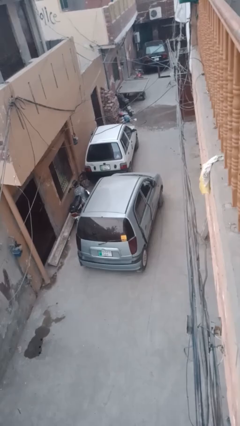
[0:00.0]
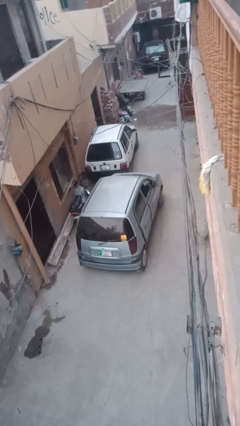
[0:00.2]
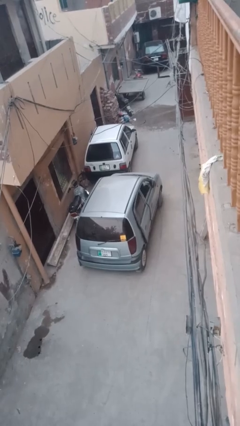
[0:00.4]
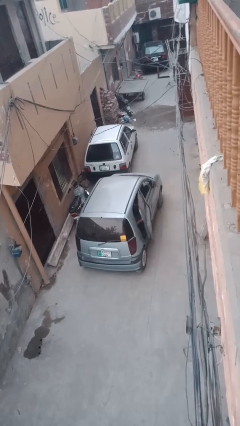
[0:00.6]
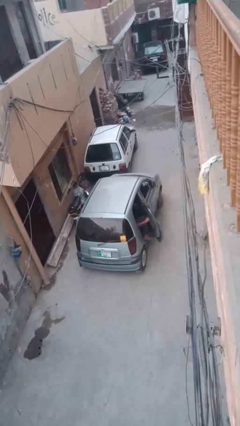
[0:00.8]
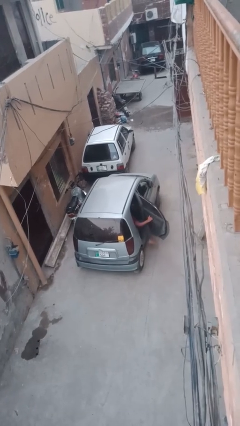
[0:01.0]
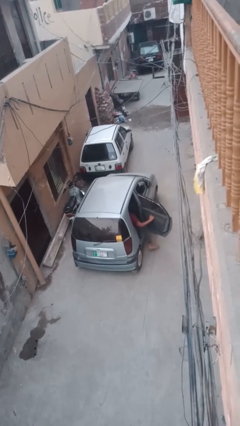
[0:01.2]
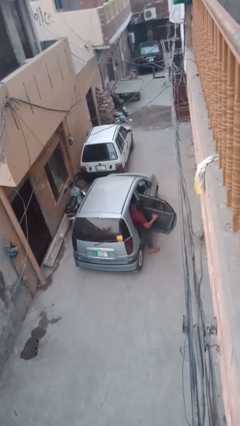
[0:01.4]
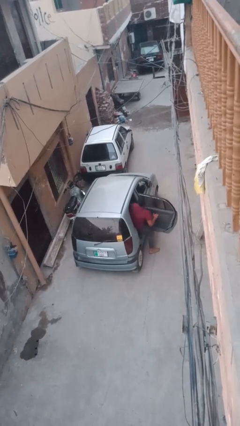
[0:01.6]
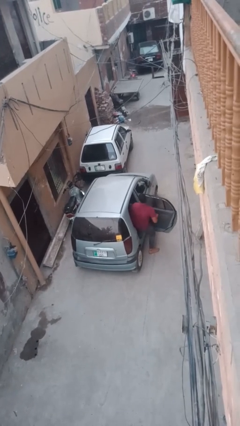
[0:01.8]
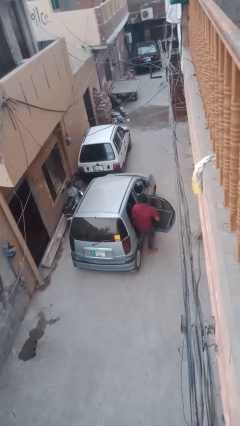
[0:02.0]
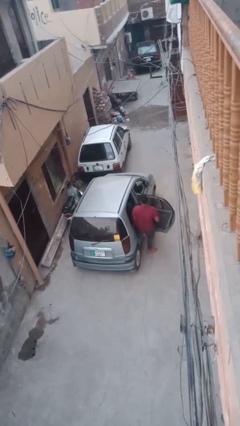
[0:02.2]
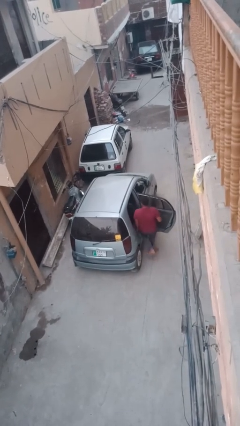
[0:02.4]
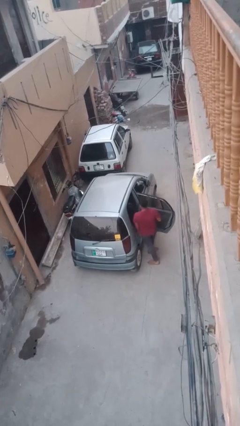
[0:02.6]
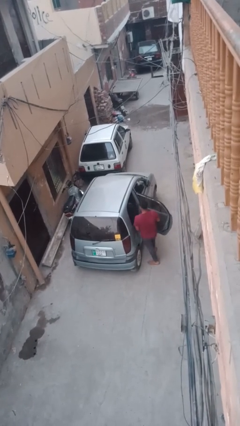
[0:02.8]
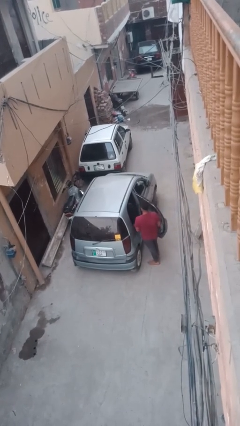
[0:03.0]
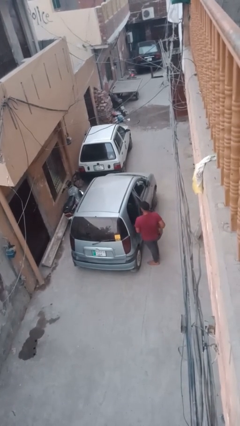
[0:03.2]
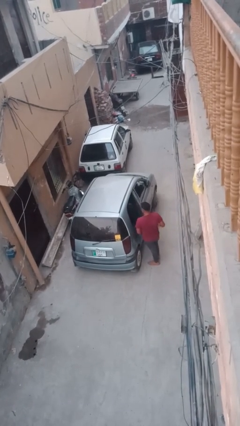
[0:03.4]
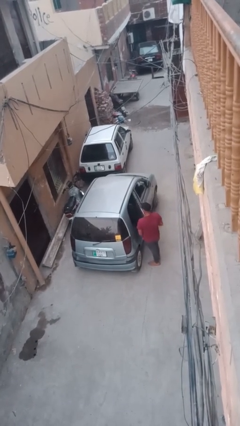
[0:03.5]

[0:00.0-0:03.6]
car drops off person

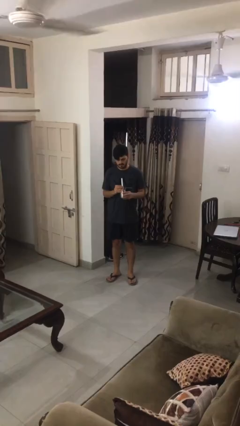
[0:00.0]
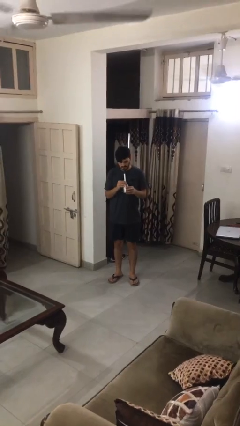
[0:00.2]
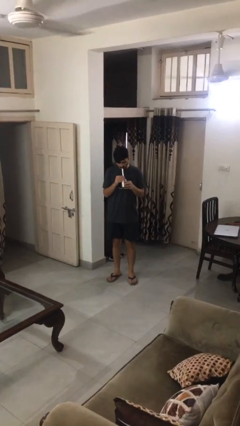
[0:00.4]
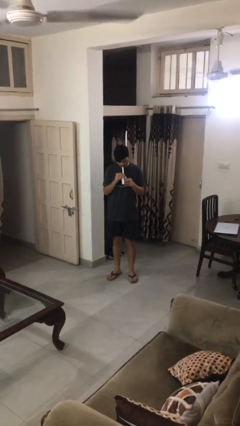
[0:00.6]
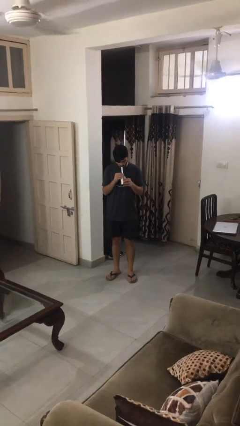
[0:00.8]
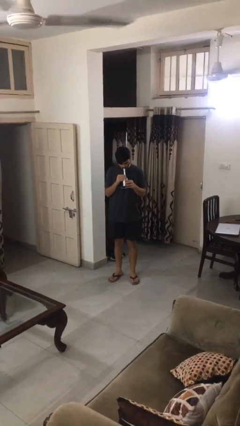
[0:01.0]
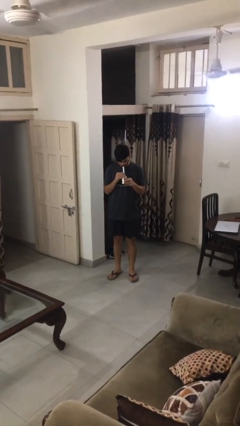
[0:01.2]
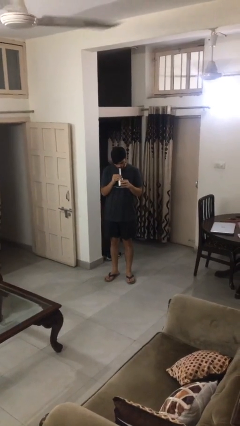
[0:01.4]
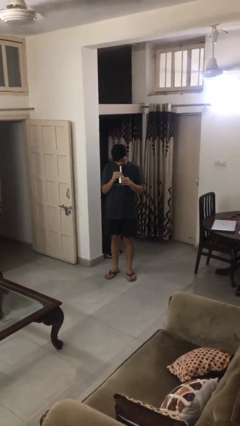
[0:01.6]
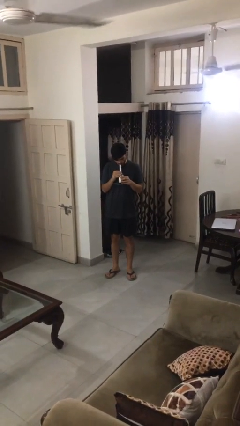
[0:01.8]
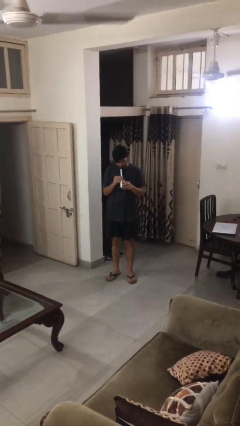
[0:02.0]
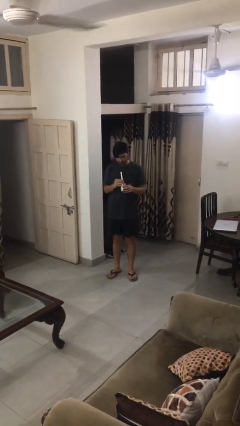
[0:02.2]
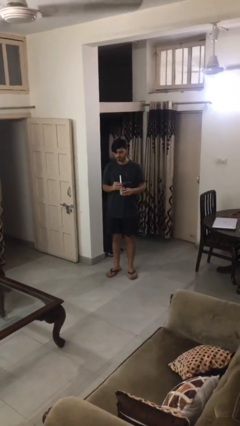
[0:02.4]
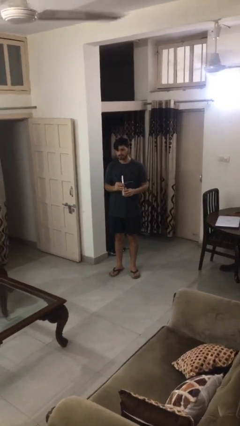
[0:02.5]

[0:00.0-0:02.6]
person drinks from straw

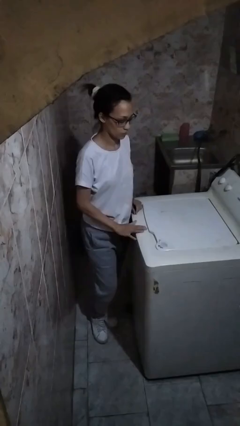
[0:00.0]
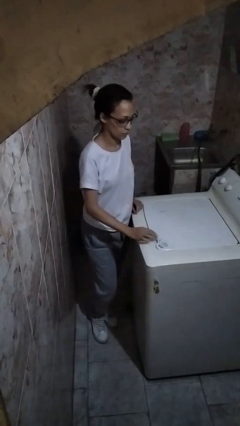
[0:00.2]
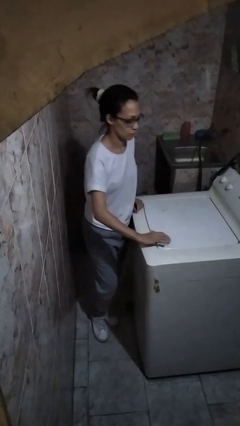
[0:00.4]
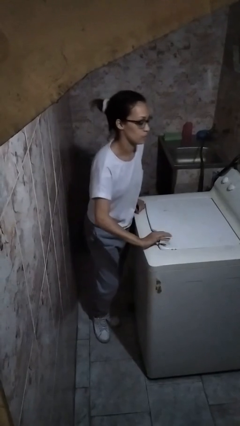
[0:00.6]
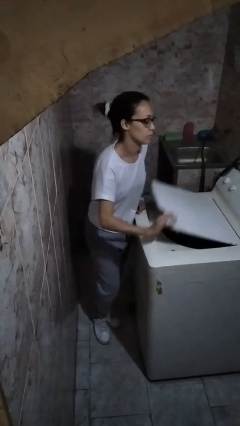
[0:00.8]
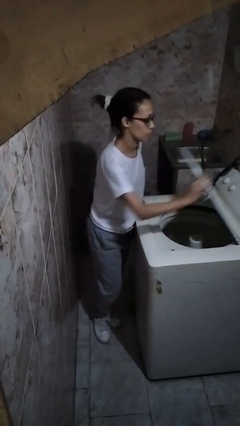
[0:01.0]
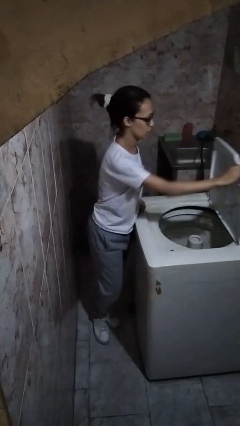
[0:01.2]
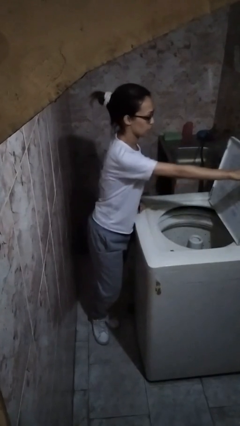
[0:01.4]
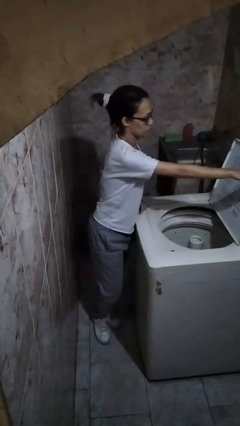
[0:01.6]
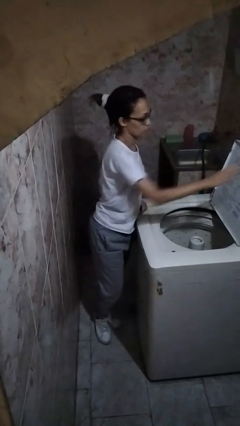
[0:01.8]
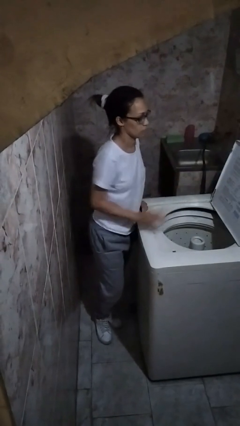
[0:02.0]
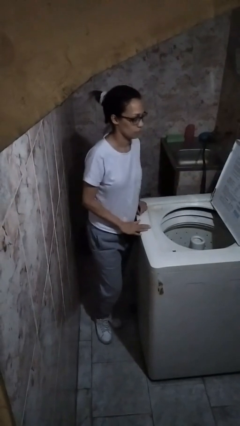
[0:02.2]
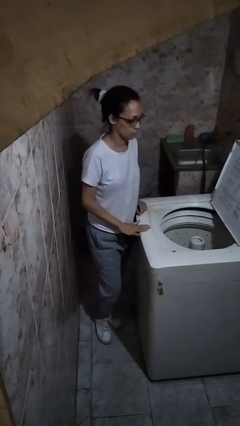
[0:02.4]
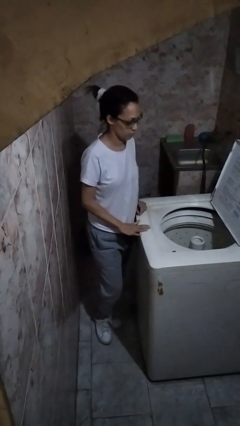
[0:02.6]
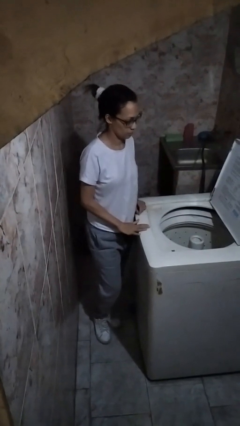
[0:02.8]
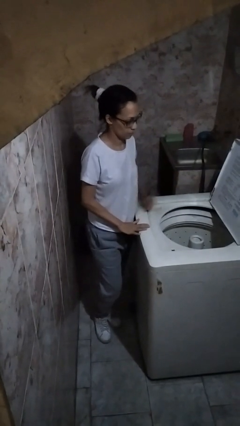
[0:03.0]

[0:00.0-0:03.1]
person opens clothes washer

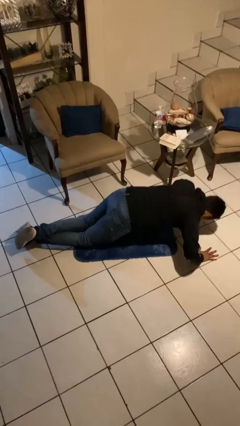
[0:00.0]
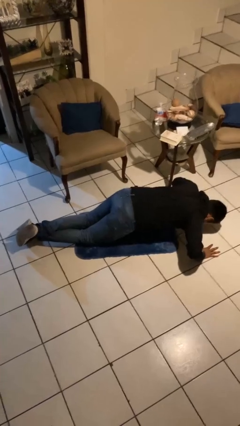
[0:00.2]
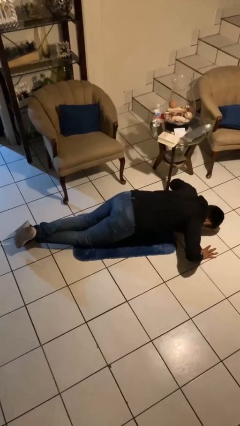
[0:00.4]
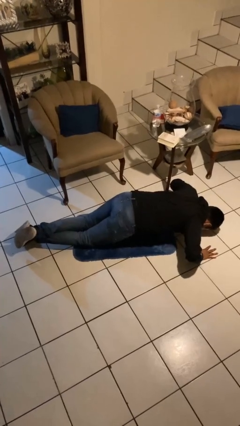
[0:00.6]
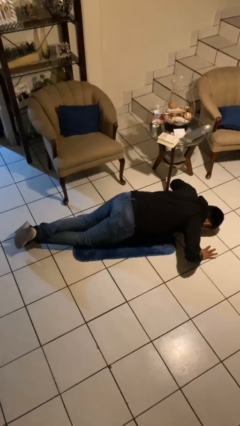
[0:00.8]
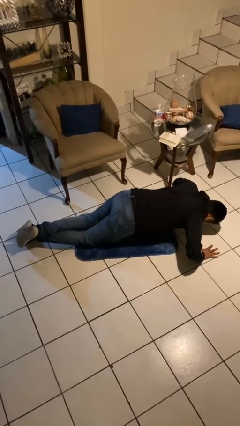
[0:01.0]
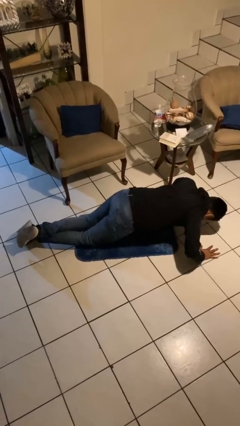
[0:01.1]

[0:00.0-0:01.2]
person exercises with pushup

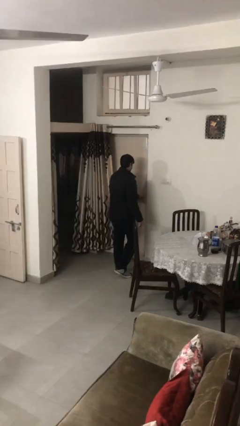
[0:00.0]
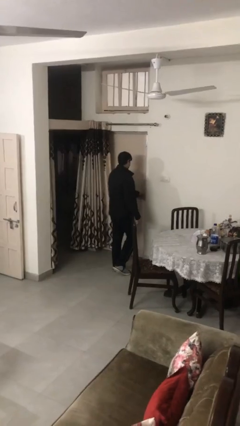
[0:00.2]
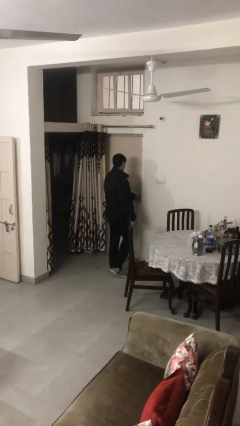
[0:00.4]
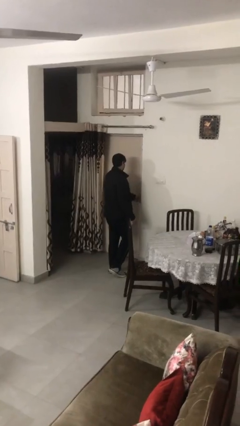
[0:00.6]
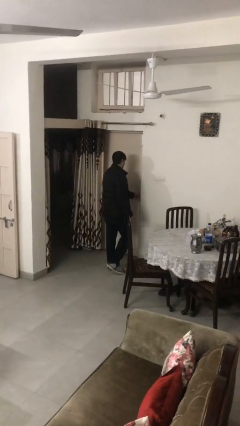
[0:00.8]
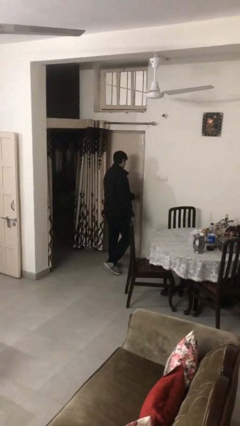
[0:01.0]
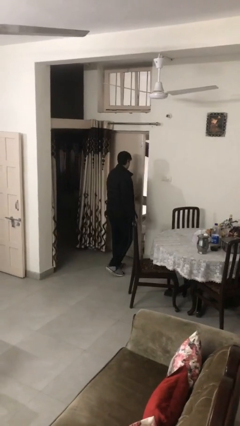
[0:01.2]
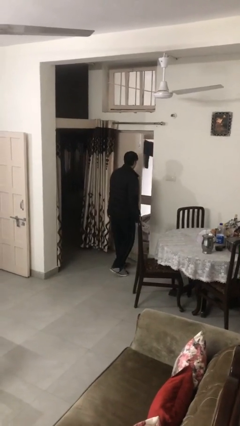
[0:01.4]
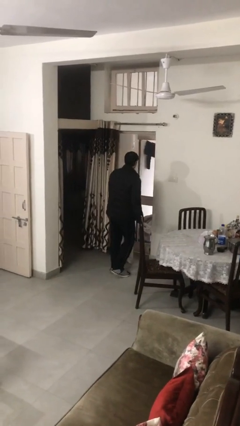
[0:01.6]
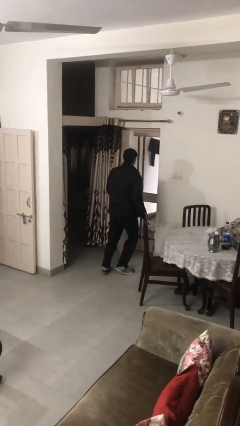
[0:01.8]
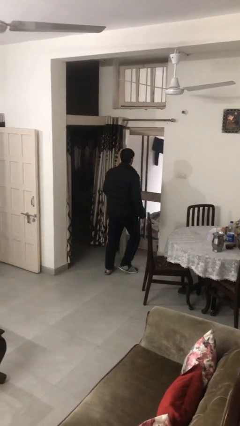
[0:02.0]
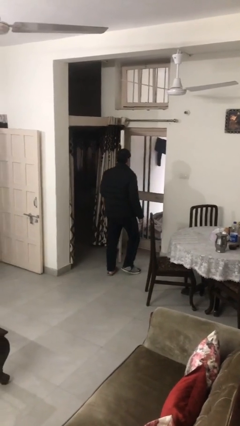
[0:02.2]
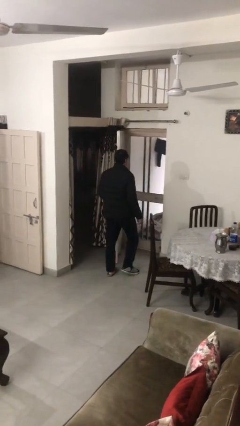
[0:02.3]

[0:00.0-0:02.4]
person opens facility door

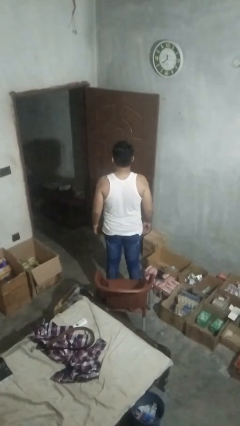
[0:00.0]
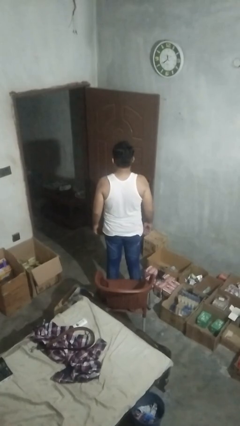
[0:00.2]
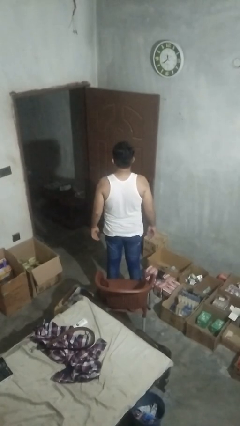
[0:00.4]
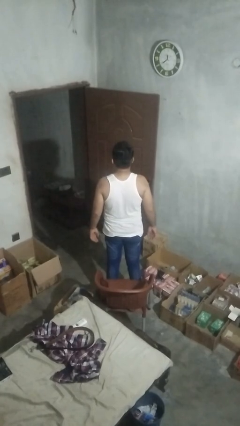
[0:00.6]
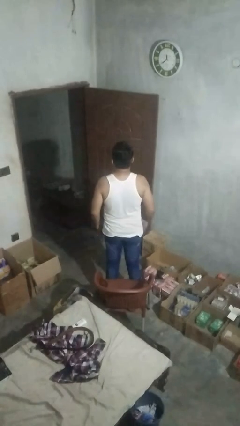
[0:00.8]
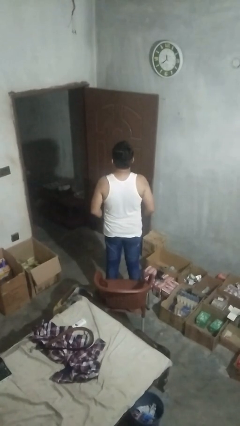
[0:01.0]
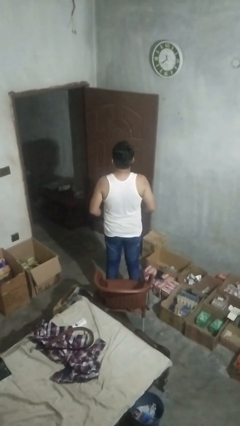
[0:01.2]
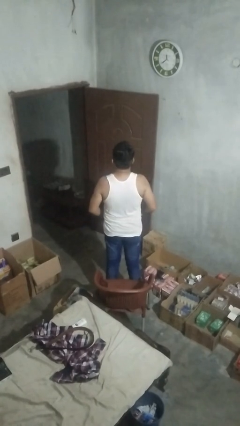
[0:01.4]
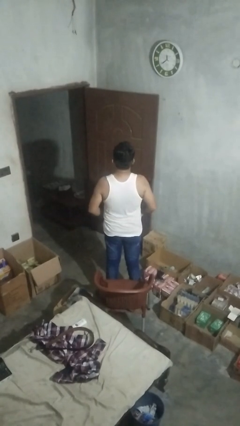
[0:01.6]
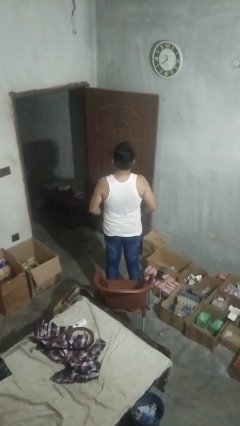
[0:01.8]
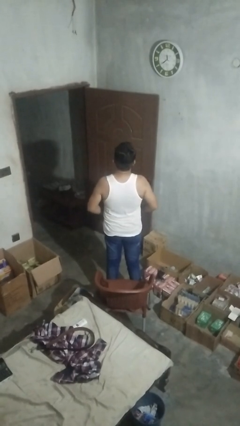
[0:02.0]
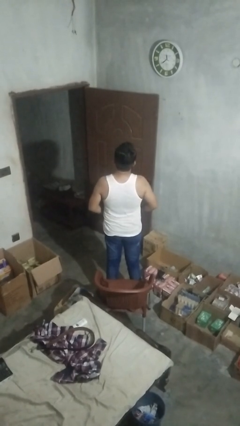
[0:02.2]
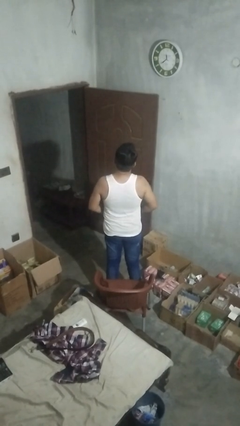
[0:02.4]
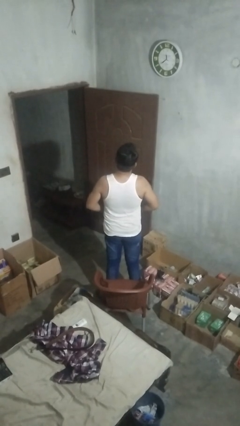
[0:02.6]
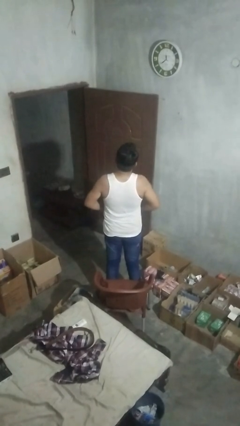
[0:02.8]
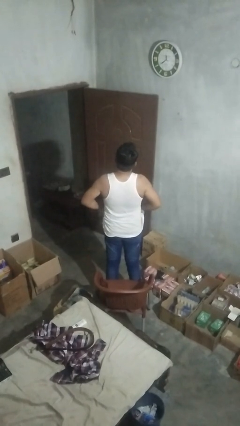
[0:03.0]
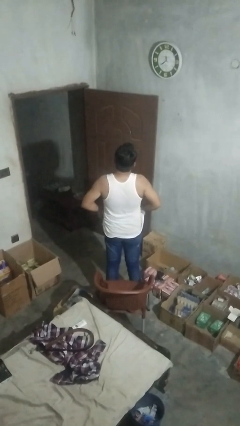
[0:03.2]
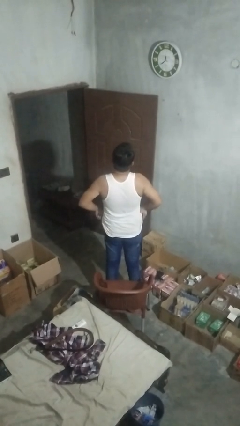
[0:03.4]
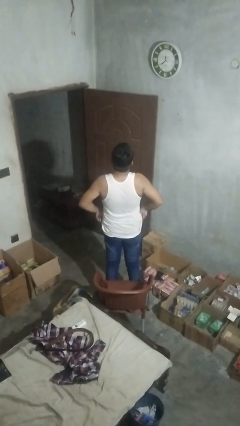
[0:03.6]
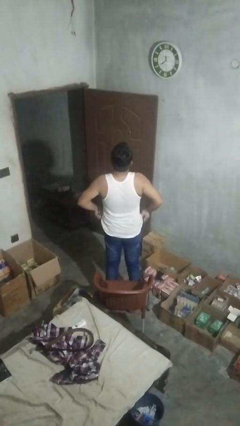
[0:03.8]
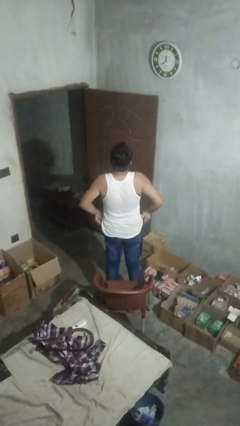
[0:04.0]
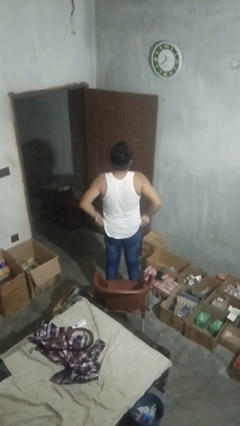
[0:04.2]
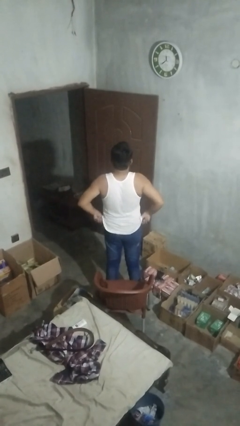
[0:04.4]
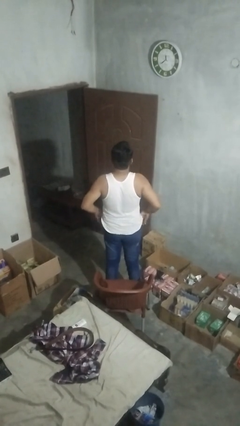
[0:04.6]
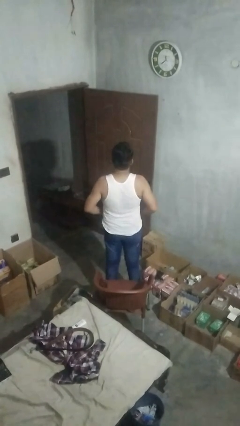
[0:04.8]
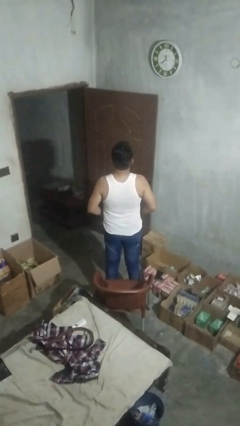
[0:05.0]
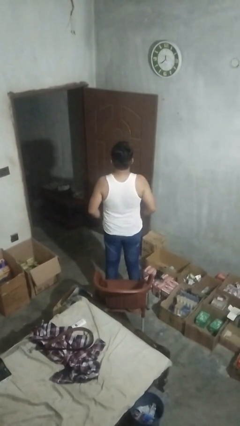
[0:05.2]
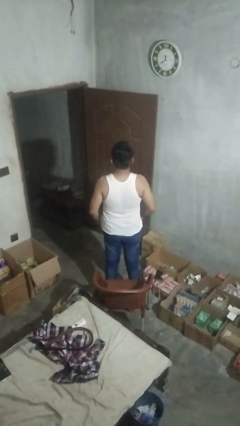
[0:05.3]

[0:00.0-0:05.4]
person hikes up pants
